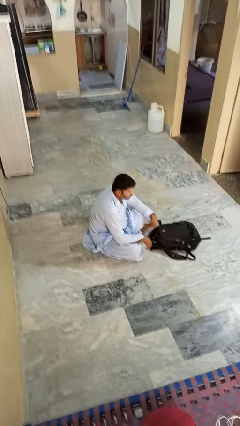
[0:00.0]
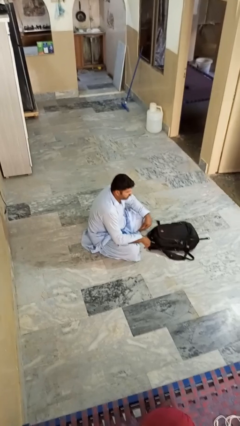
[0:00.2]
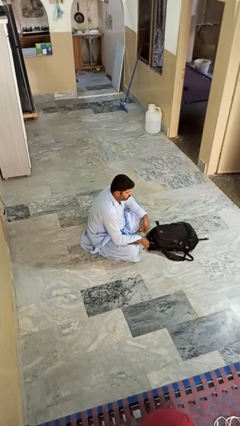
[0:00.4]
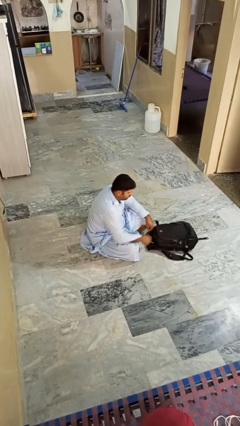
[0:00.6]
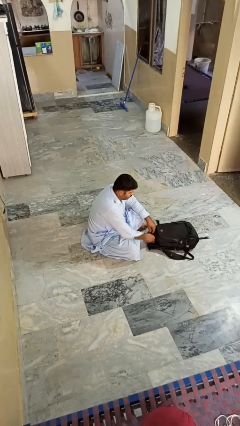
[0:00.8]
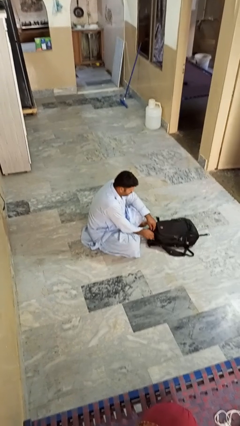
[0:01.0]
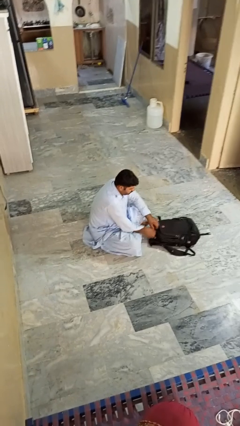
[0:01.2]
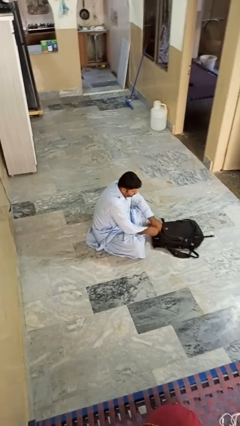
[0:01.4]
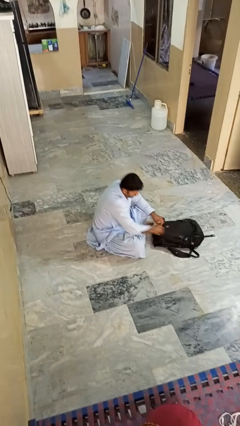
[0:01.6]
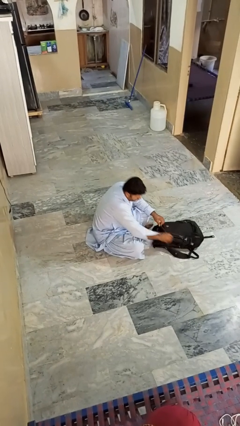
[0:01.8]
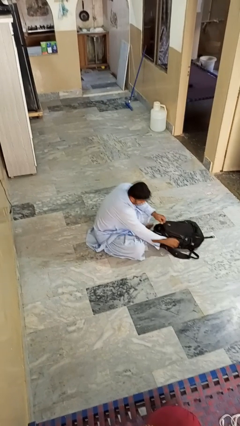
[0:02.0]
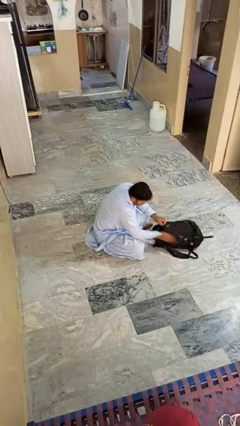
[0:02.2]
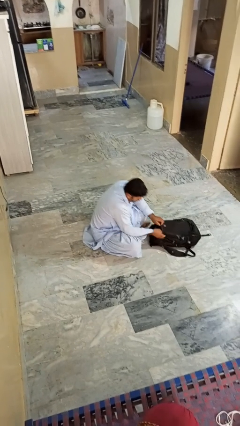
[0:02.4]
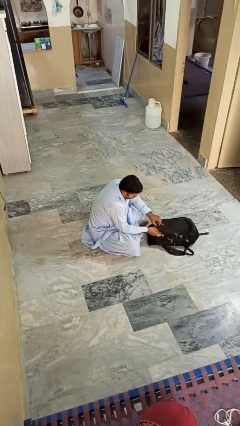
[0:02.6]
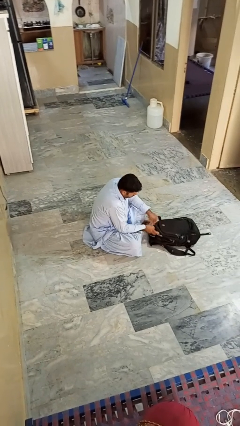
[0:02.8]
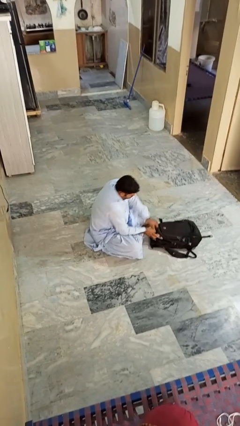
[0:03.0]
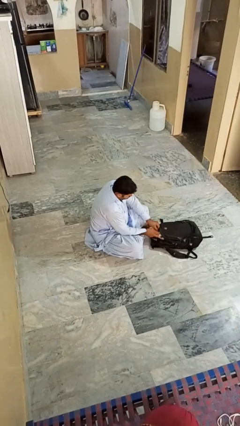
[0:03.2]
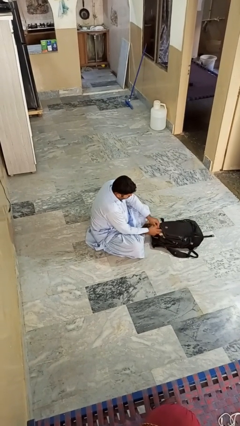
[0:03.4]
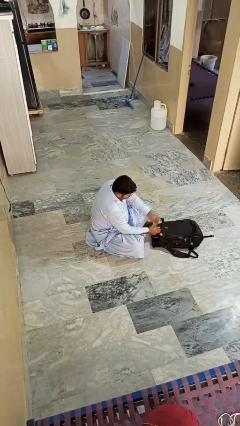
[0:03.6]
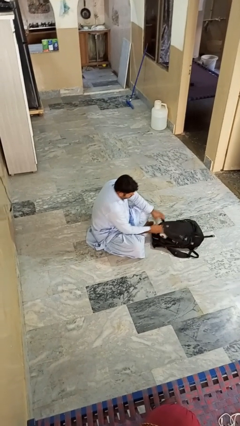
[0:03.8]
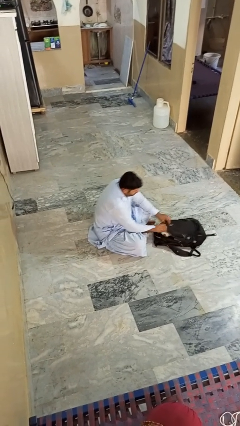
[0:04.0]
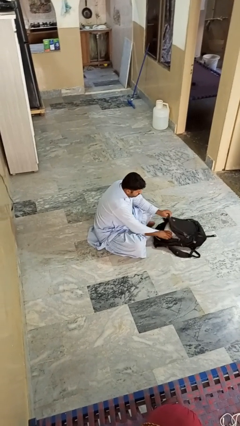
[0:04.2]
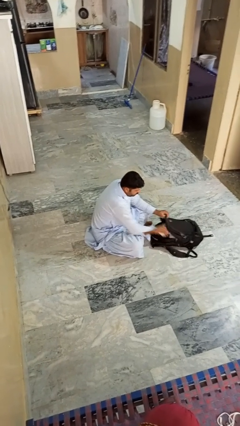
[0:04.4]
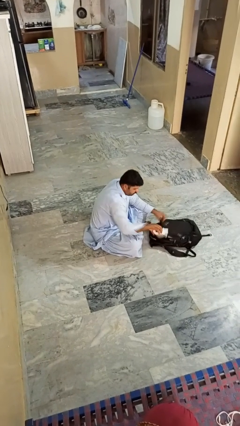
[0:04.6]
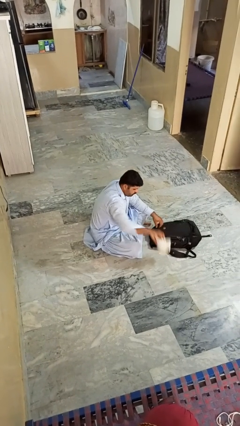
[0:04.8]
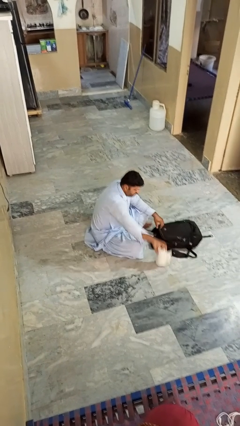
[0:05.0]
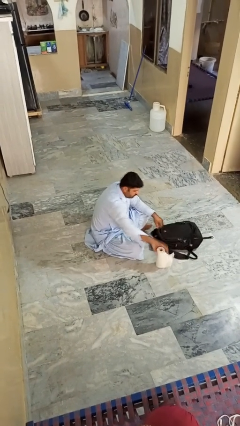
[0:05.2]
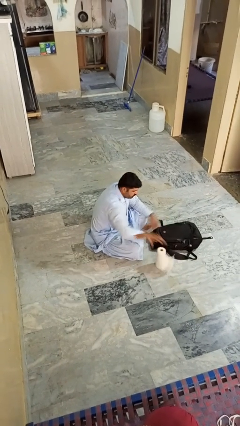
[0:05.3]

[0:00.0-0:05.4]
person takes object from bag

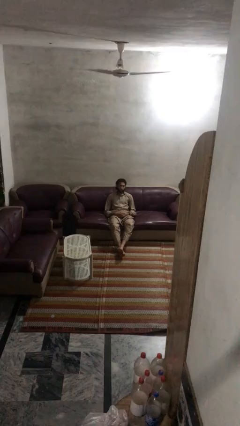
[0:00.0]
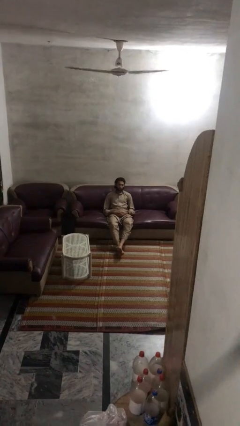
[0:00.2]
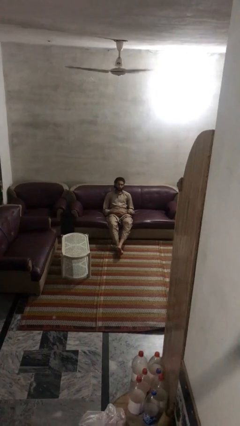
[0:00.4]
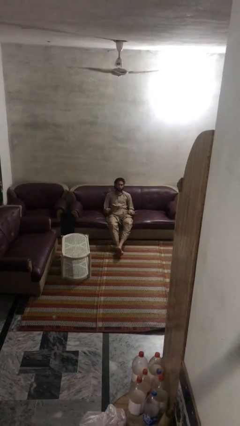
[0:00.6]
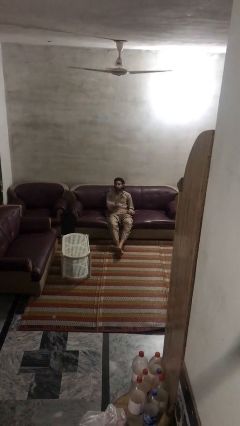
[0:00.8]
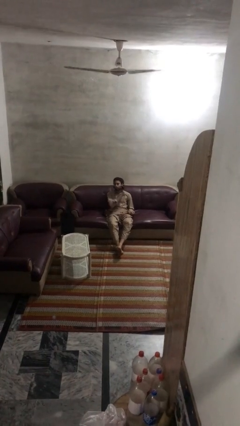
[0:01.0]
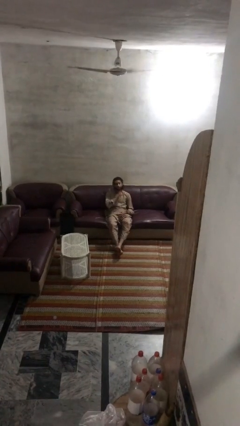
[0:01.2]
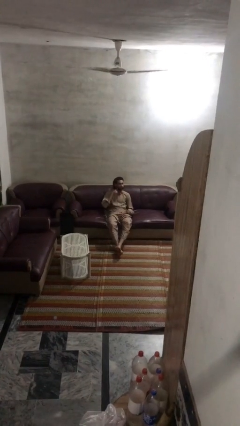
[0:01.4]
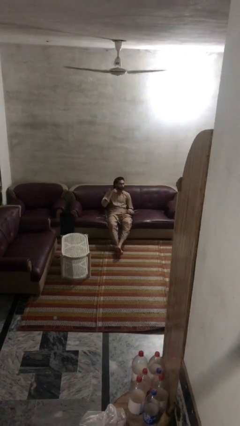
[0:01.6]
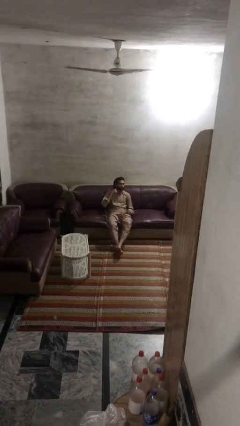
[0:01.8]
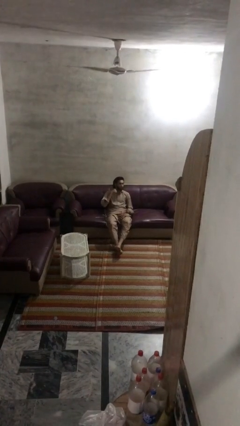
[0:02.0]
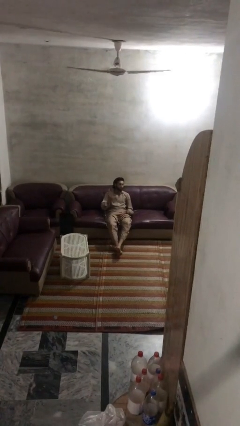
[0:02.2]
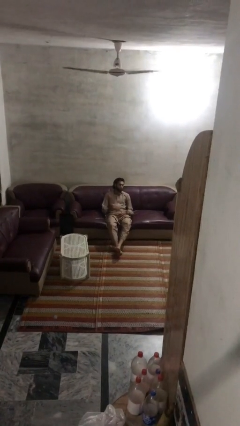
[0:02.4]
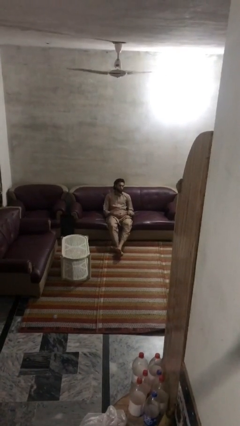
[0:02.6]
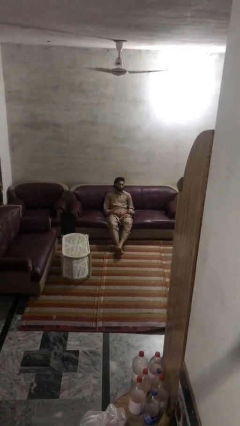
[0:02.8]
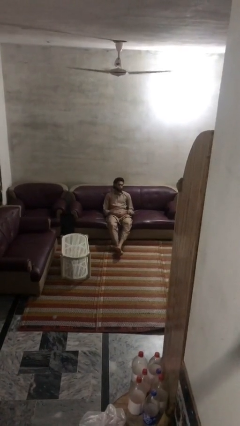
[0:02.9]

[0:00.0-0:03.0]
person gestures cut

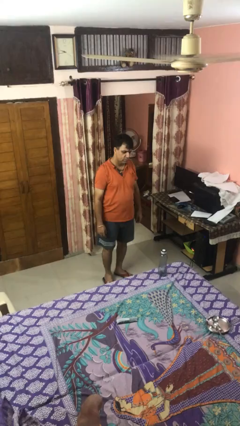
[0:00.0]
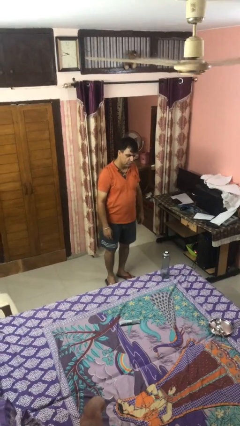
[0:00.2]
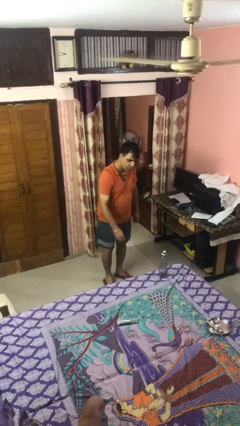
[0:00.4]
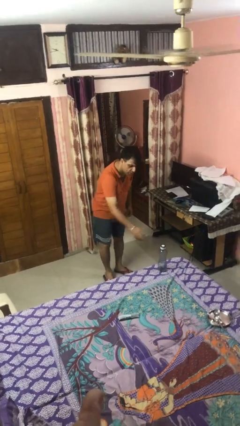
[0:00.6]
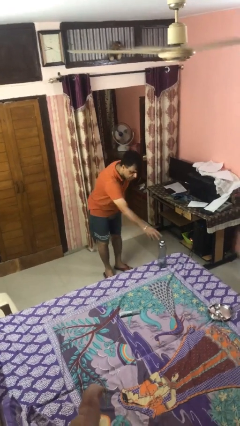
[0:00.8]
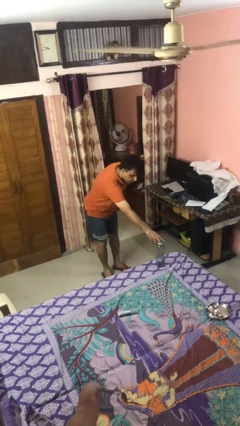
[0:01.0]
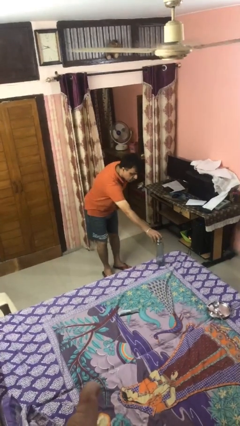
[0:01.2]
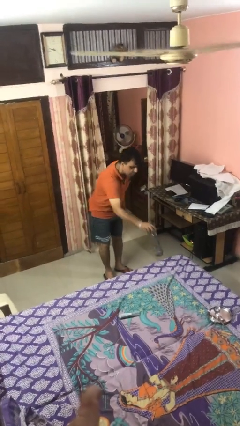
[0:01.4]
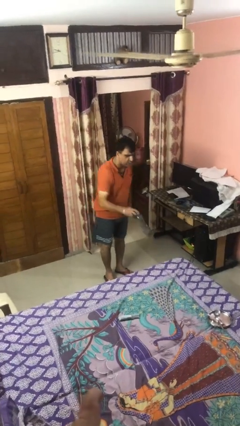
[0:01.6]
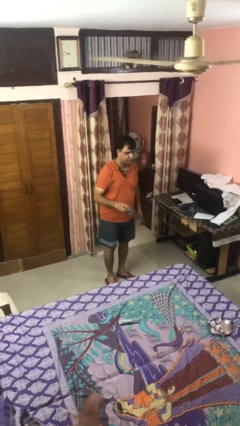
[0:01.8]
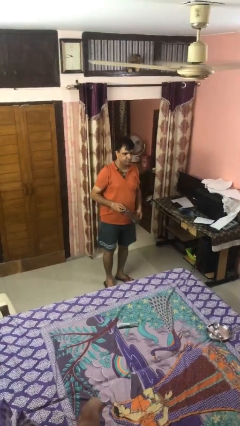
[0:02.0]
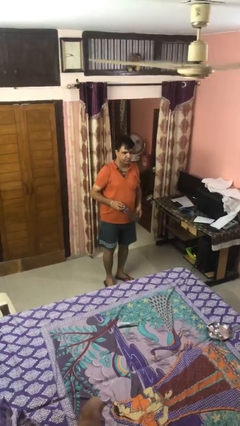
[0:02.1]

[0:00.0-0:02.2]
person picks up object from bed

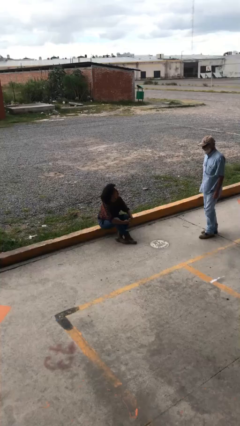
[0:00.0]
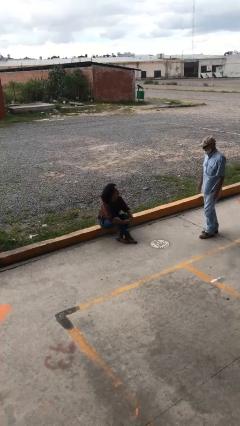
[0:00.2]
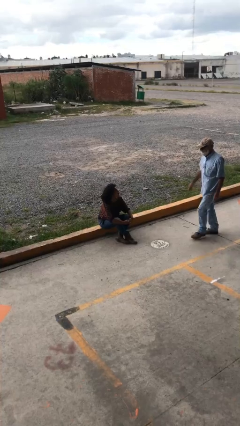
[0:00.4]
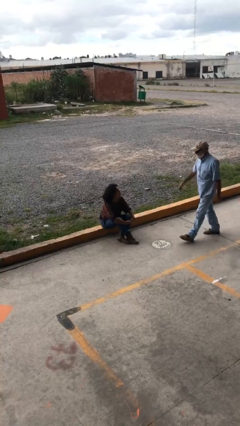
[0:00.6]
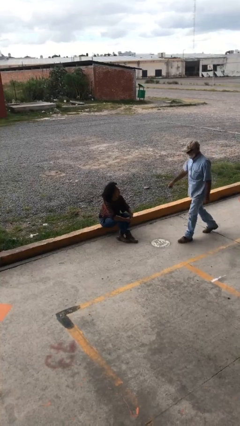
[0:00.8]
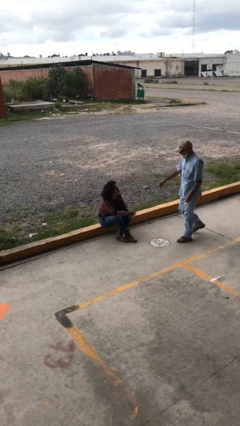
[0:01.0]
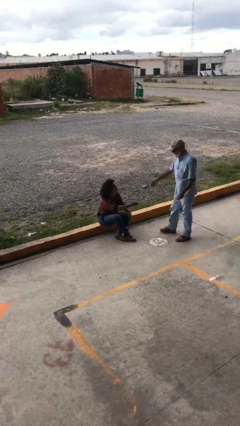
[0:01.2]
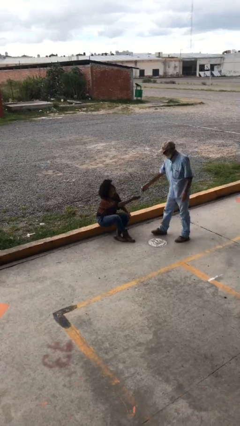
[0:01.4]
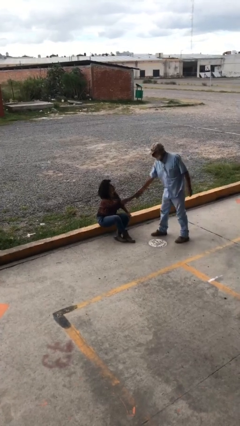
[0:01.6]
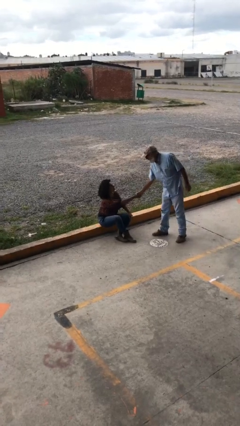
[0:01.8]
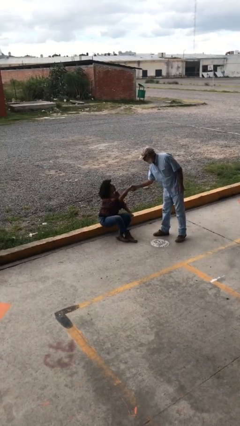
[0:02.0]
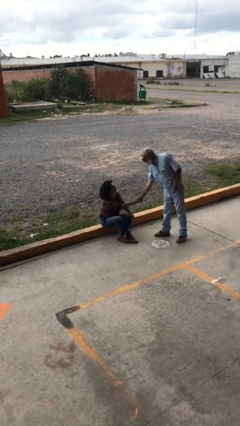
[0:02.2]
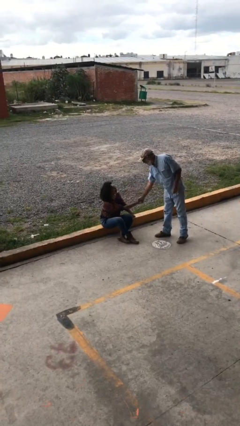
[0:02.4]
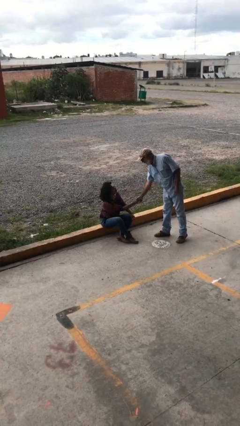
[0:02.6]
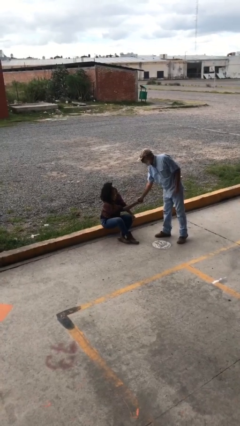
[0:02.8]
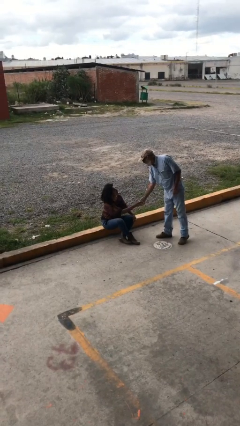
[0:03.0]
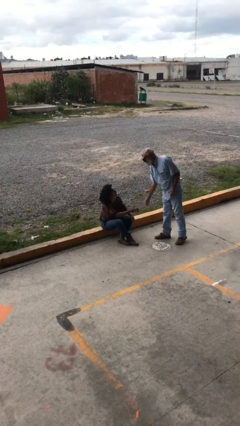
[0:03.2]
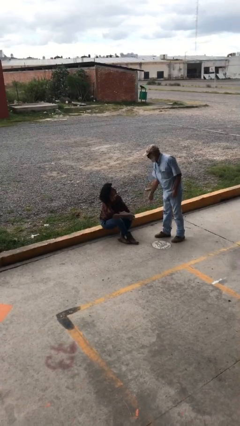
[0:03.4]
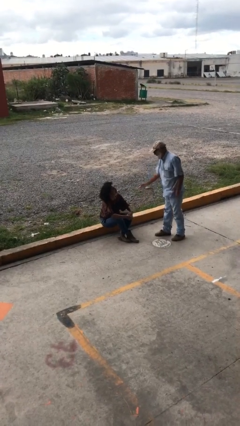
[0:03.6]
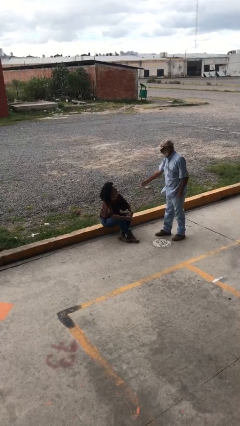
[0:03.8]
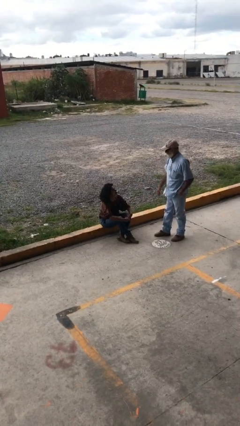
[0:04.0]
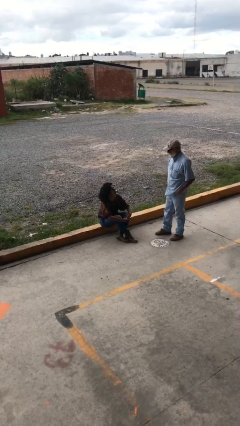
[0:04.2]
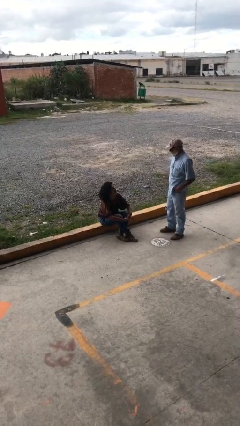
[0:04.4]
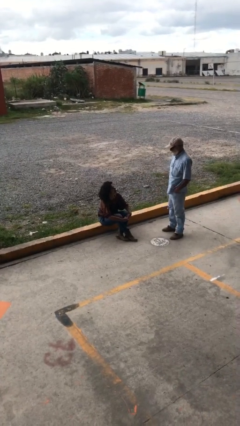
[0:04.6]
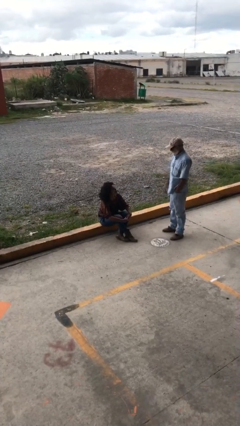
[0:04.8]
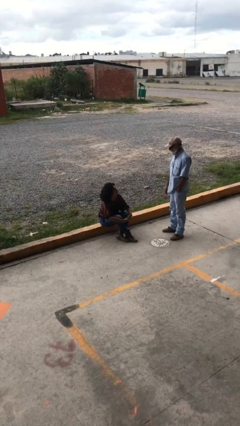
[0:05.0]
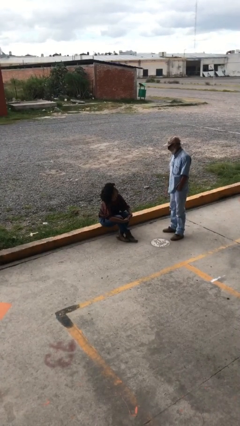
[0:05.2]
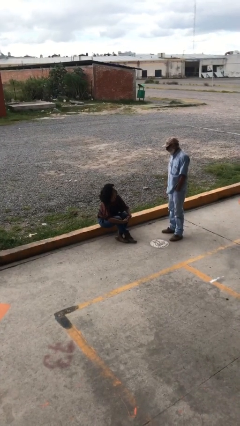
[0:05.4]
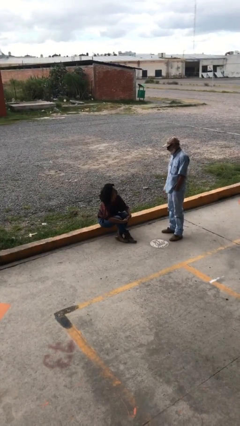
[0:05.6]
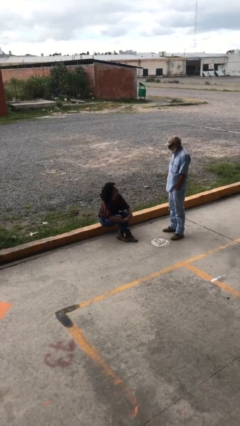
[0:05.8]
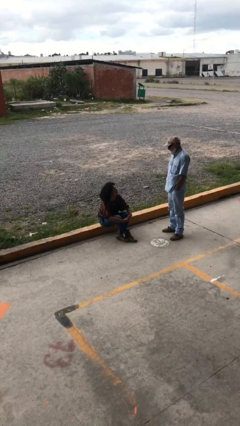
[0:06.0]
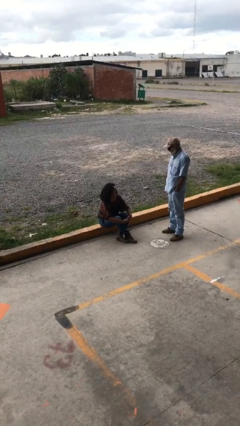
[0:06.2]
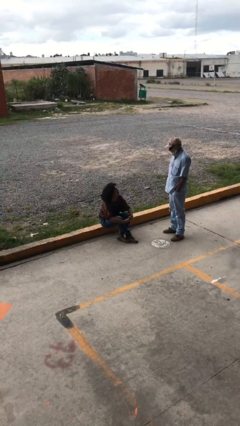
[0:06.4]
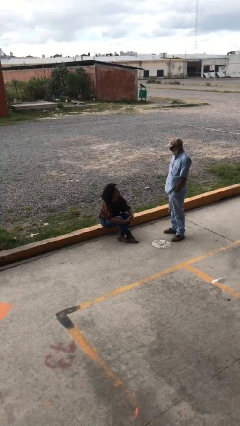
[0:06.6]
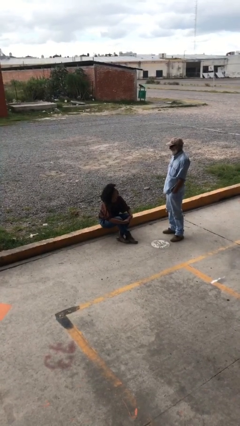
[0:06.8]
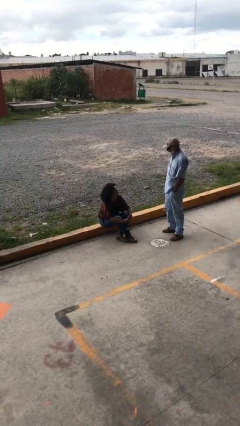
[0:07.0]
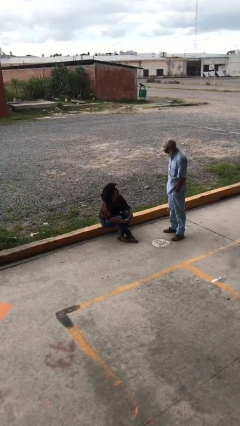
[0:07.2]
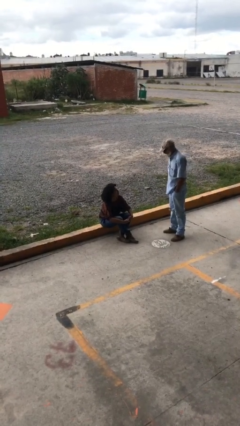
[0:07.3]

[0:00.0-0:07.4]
person shakes hand
